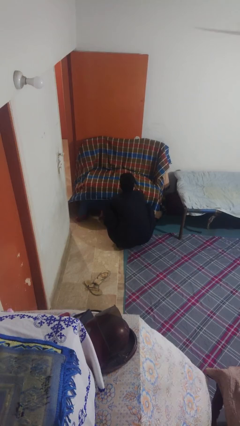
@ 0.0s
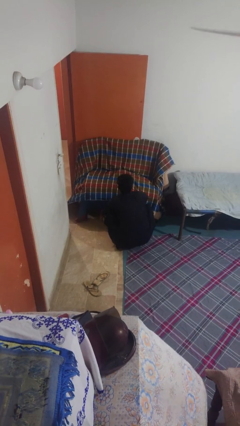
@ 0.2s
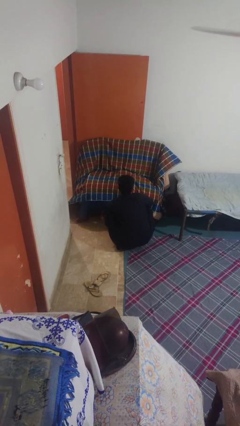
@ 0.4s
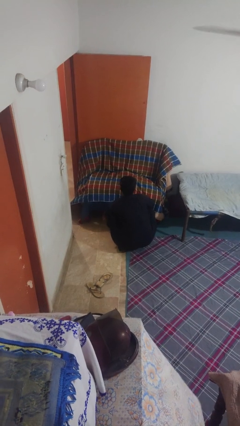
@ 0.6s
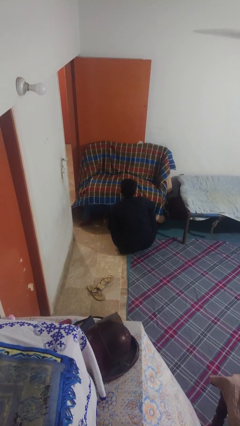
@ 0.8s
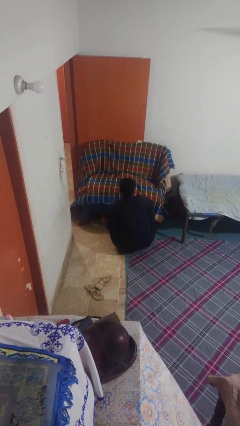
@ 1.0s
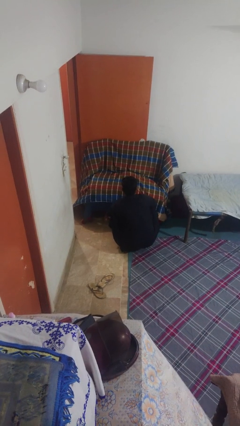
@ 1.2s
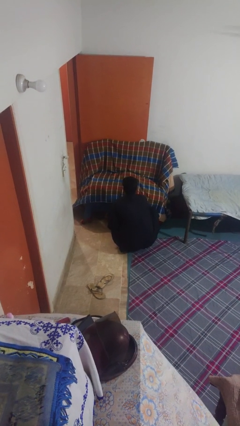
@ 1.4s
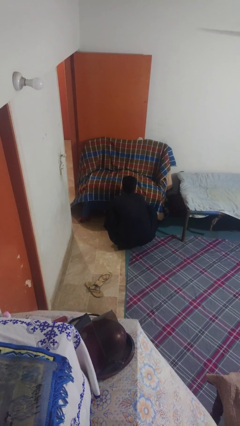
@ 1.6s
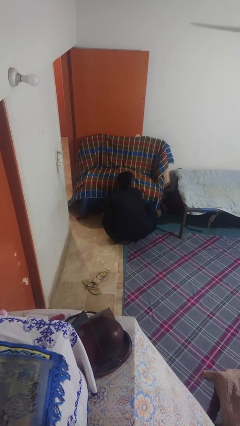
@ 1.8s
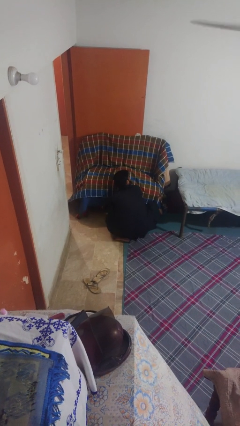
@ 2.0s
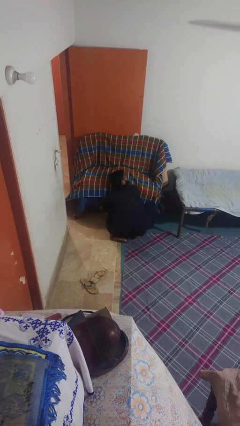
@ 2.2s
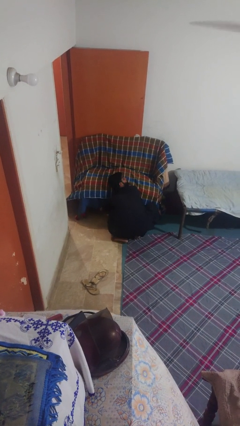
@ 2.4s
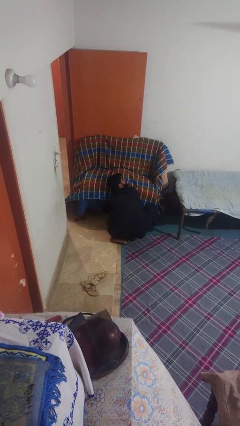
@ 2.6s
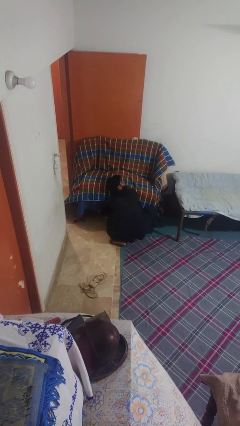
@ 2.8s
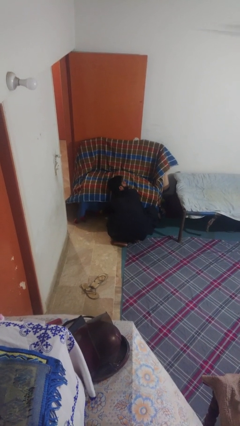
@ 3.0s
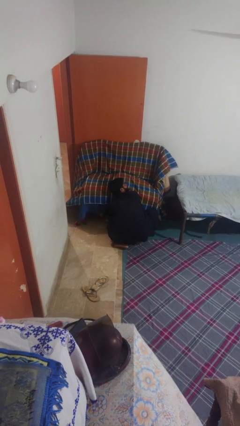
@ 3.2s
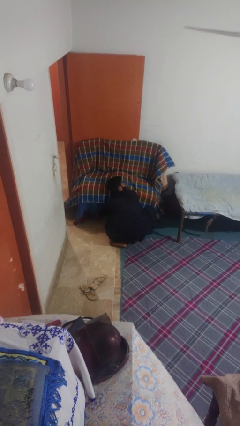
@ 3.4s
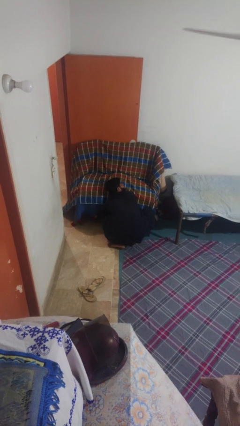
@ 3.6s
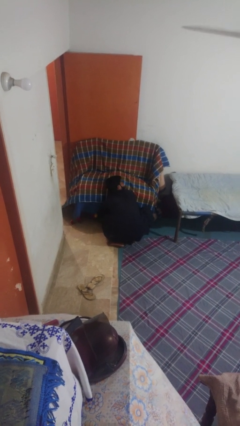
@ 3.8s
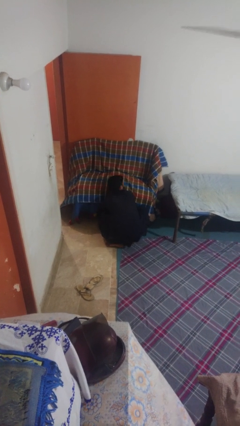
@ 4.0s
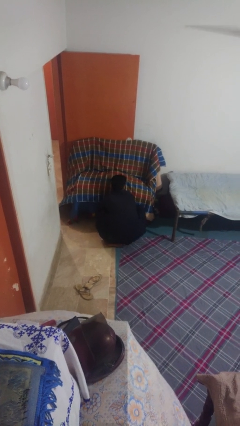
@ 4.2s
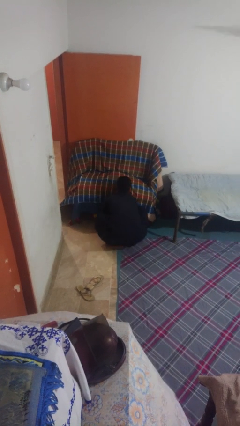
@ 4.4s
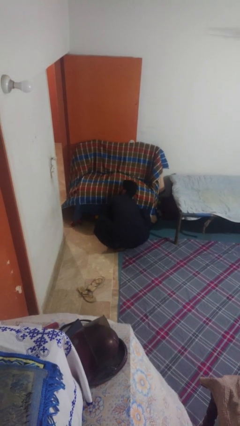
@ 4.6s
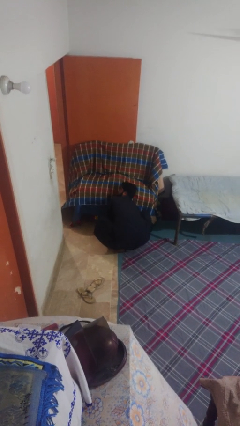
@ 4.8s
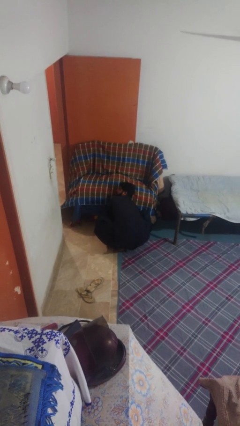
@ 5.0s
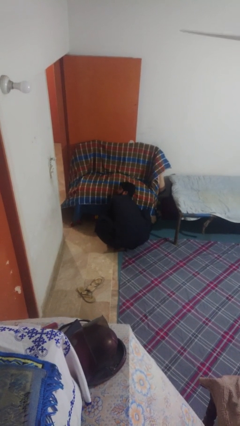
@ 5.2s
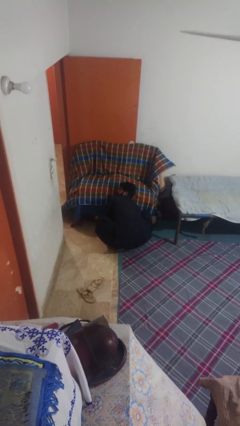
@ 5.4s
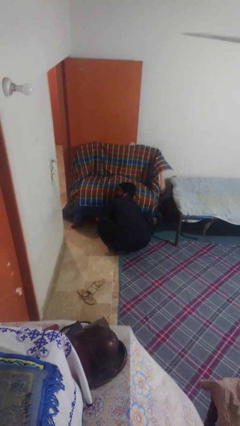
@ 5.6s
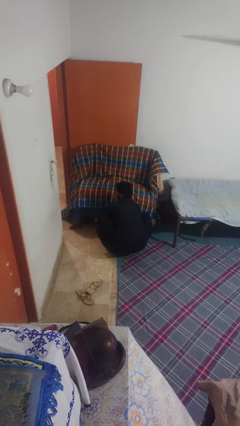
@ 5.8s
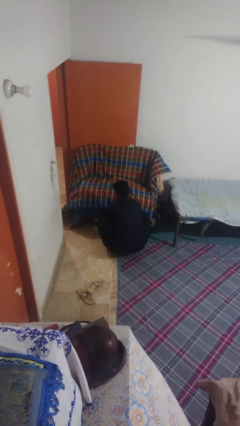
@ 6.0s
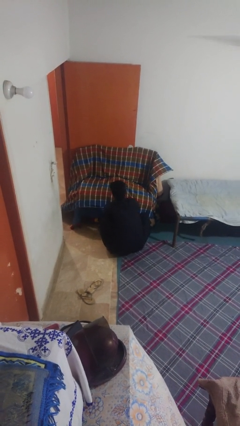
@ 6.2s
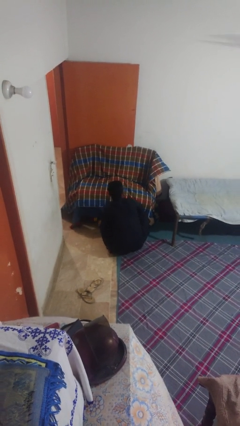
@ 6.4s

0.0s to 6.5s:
person searches under couch

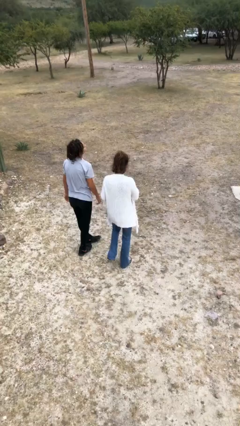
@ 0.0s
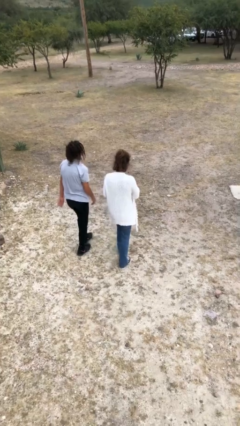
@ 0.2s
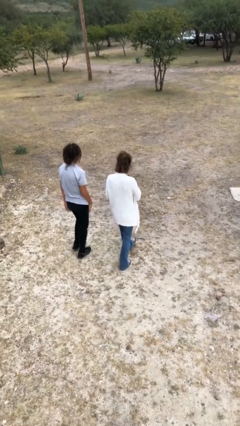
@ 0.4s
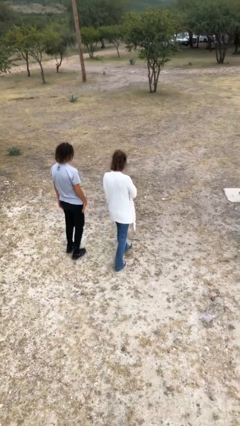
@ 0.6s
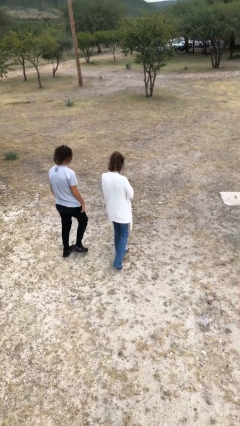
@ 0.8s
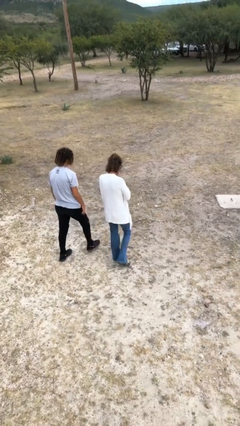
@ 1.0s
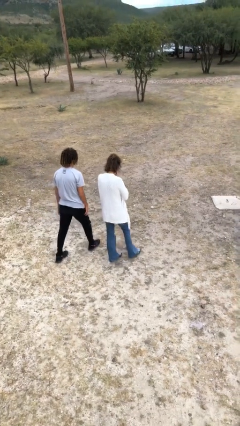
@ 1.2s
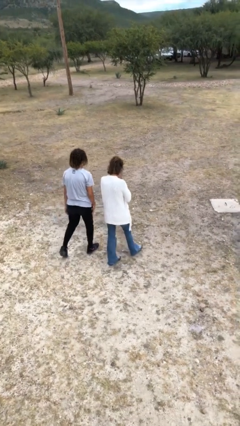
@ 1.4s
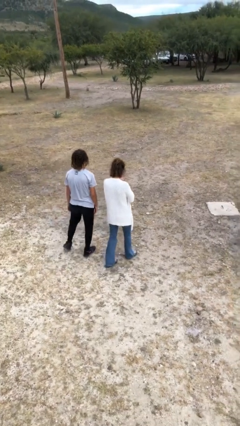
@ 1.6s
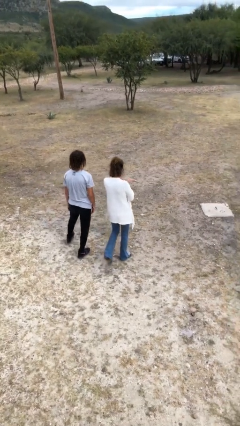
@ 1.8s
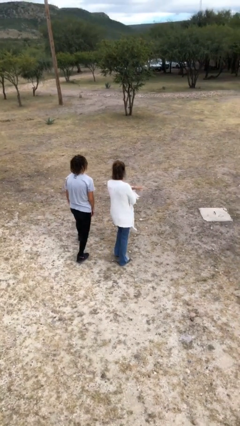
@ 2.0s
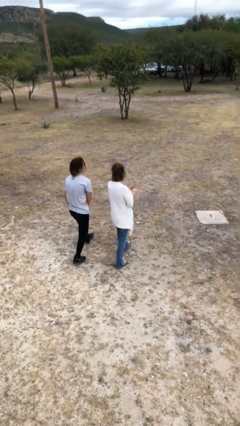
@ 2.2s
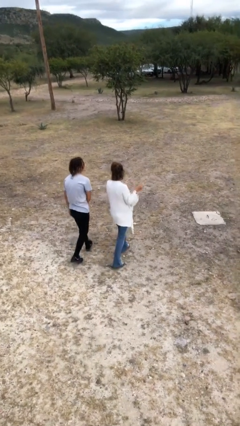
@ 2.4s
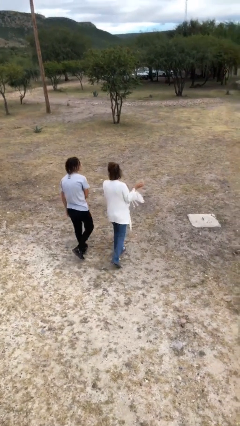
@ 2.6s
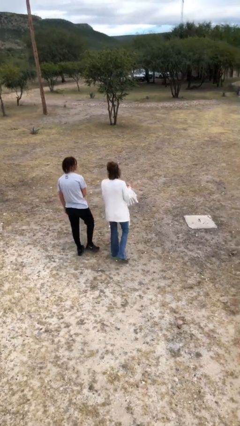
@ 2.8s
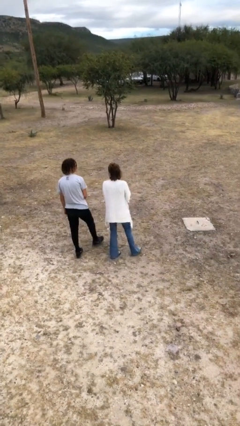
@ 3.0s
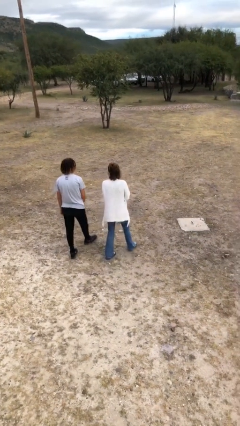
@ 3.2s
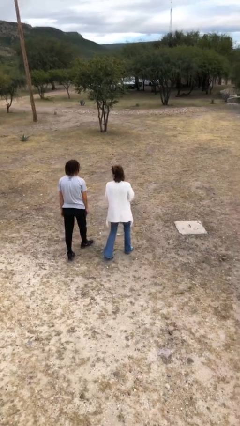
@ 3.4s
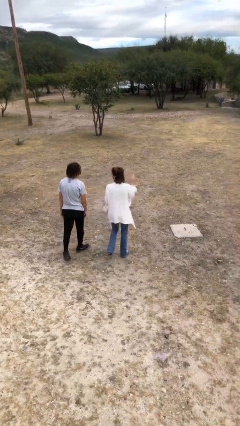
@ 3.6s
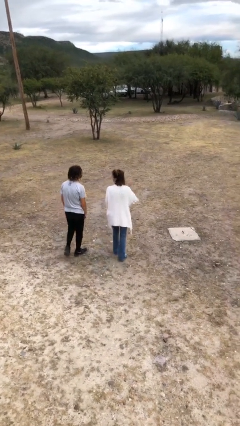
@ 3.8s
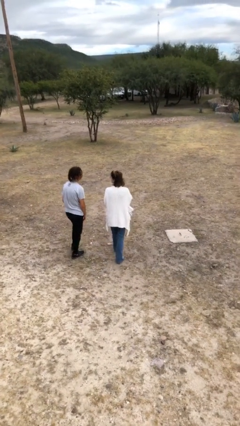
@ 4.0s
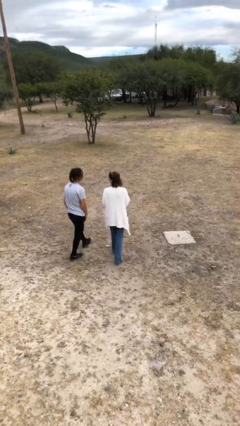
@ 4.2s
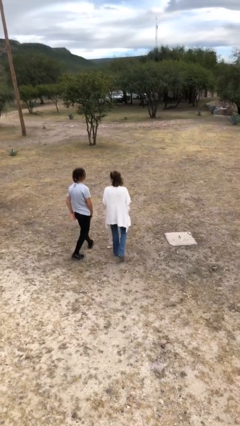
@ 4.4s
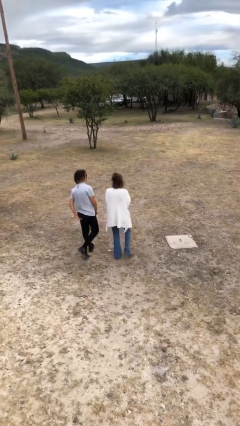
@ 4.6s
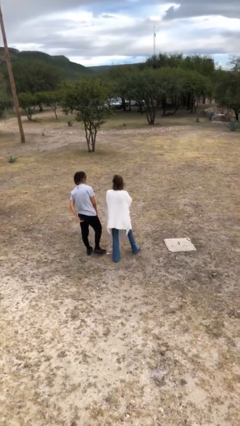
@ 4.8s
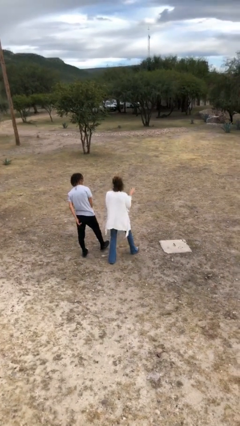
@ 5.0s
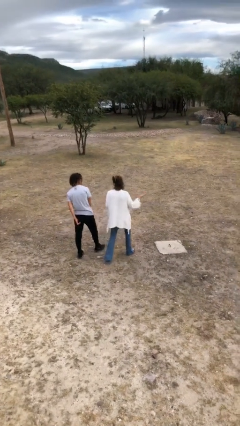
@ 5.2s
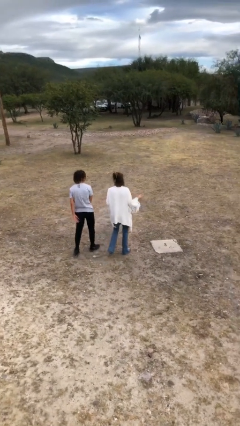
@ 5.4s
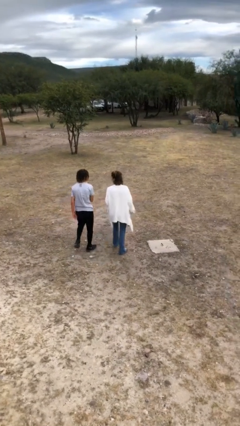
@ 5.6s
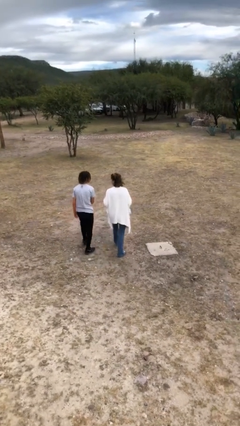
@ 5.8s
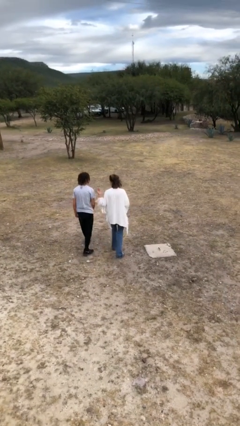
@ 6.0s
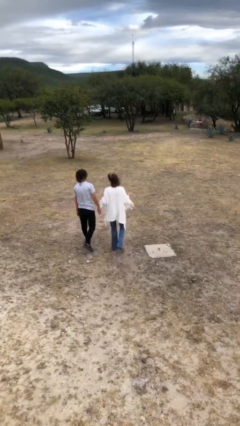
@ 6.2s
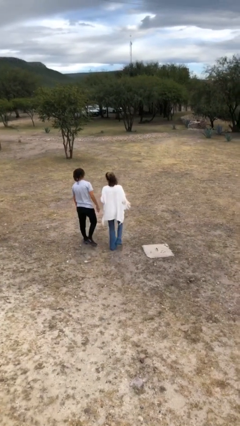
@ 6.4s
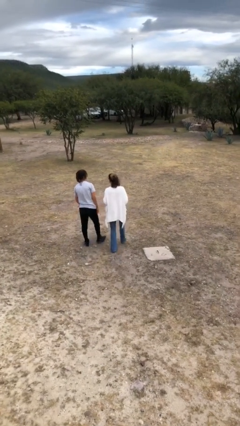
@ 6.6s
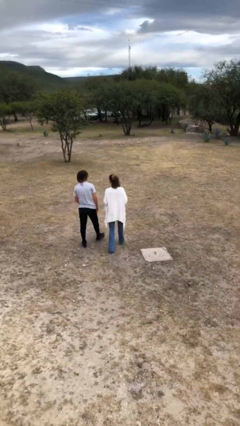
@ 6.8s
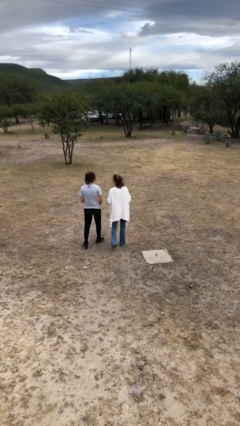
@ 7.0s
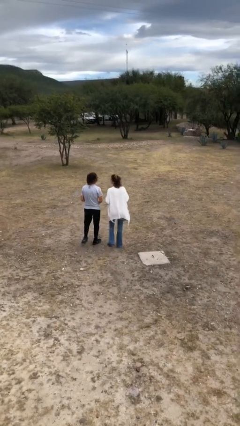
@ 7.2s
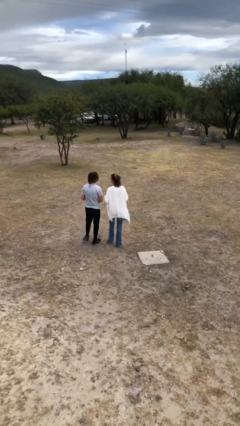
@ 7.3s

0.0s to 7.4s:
person talks to person

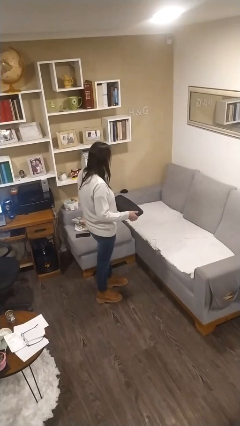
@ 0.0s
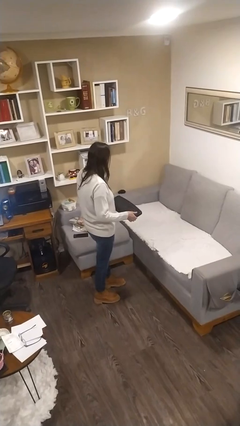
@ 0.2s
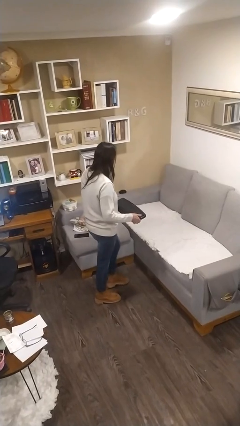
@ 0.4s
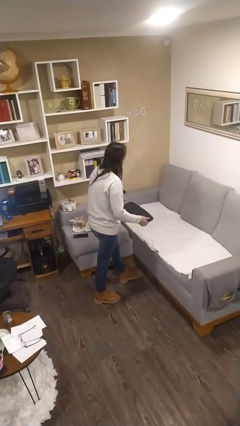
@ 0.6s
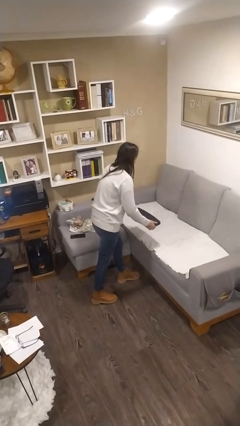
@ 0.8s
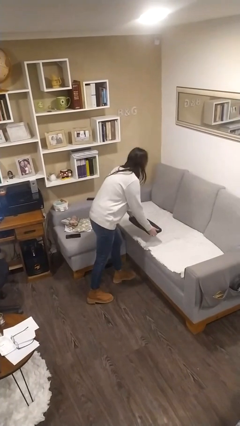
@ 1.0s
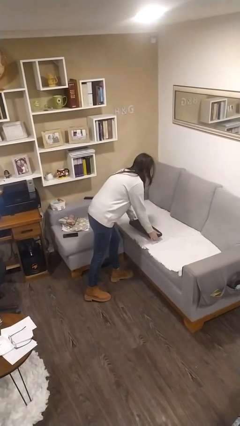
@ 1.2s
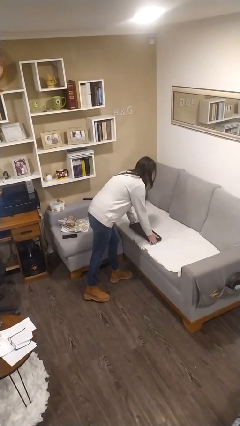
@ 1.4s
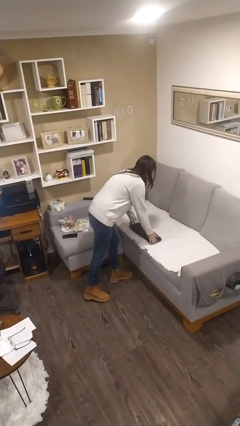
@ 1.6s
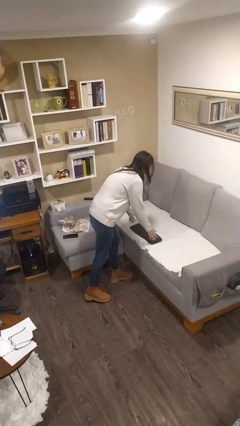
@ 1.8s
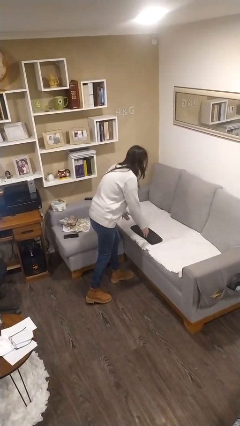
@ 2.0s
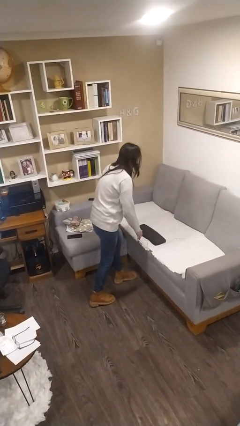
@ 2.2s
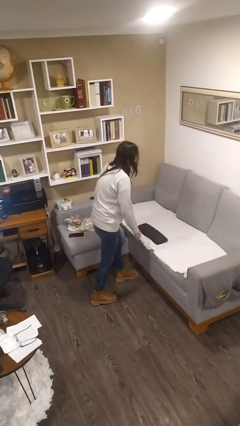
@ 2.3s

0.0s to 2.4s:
person puts down object on couch

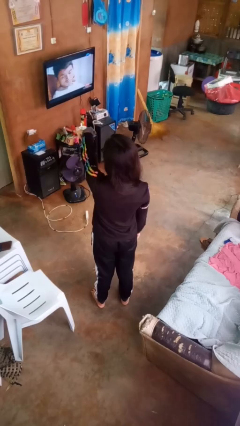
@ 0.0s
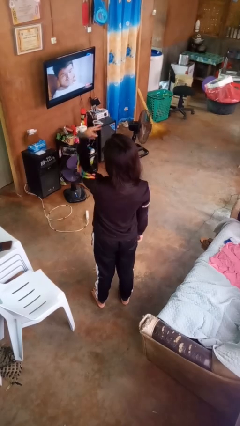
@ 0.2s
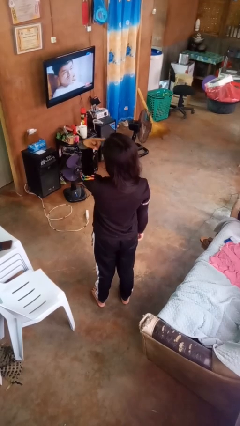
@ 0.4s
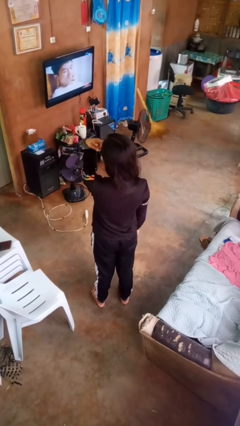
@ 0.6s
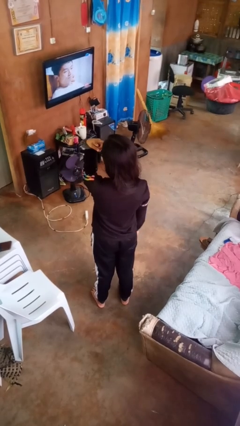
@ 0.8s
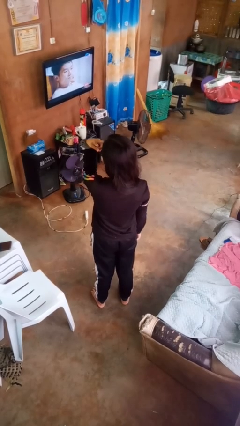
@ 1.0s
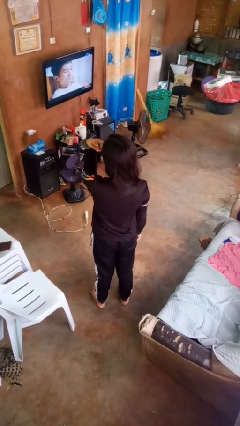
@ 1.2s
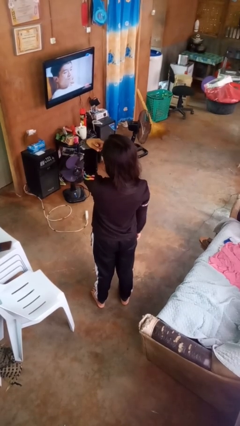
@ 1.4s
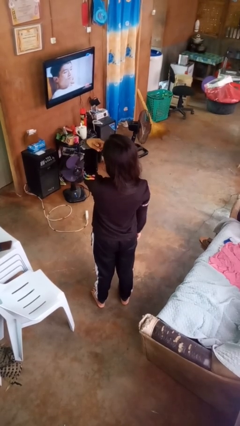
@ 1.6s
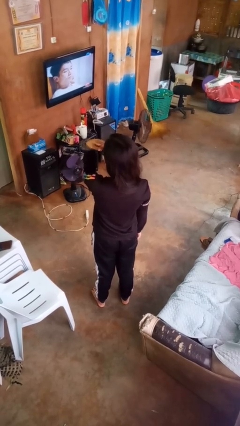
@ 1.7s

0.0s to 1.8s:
person gestures watch closely
